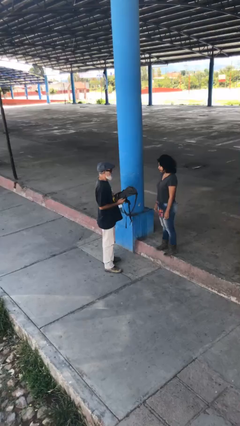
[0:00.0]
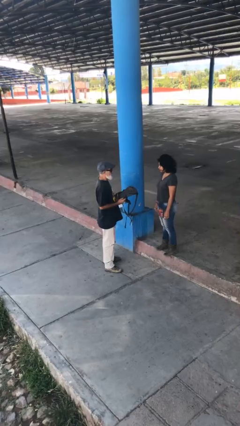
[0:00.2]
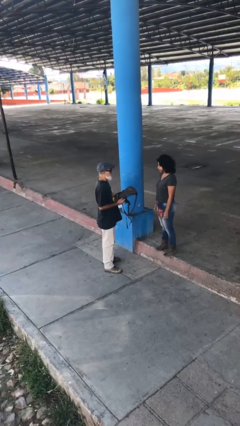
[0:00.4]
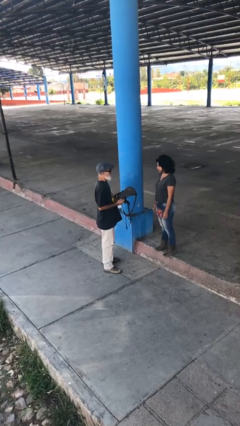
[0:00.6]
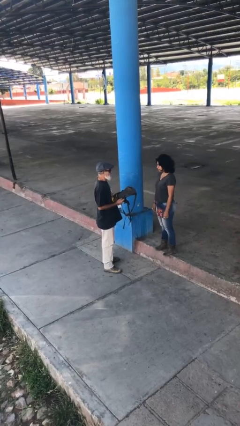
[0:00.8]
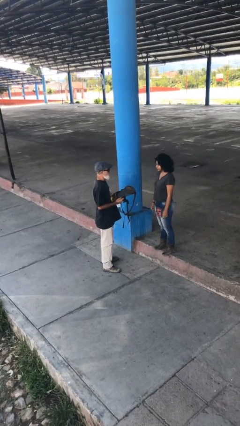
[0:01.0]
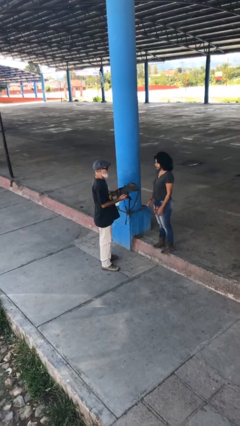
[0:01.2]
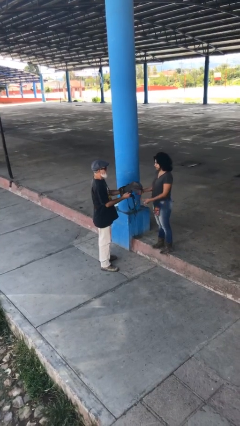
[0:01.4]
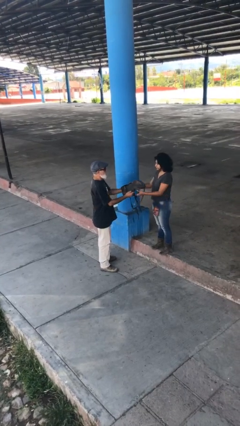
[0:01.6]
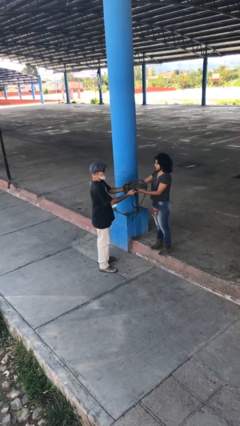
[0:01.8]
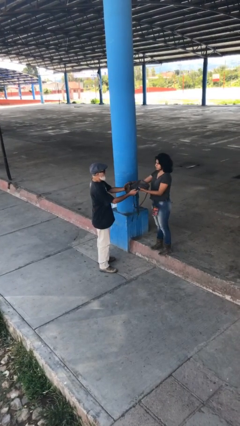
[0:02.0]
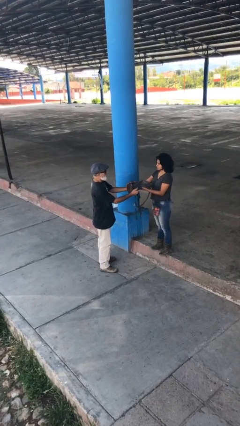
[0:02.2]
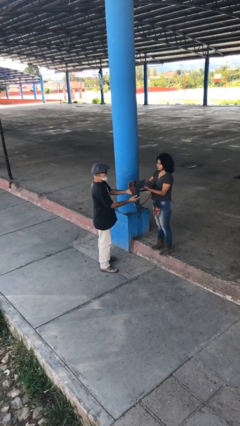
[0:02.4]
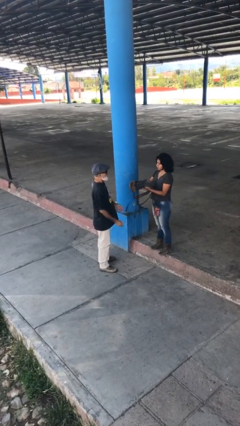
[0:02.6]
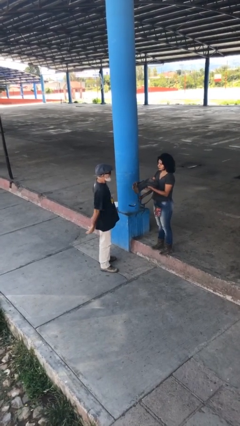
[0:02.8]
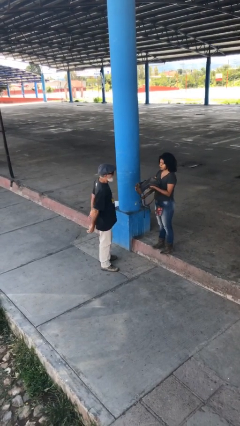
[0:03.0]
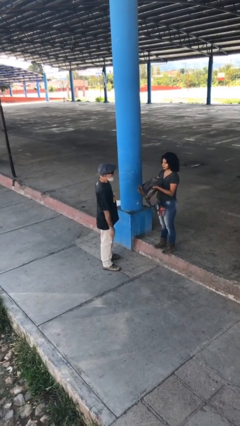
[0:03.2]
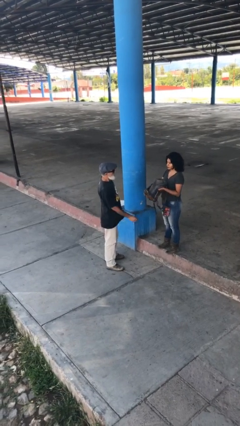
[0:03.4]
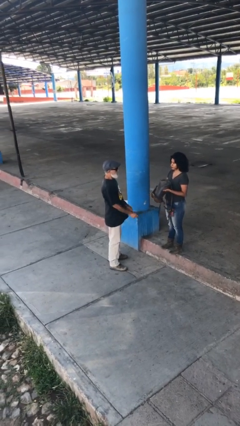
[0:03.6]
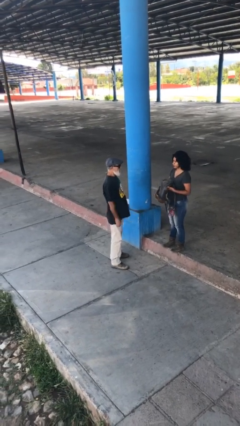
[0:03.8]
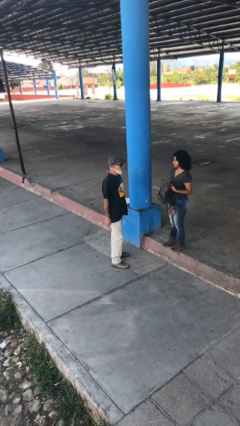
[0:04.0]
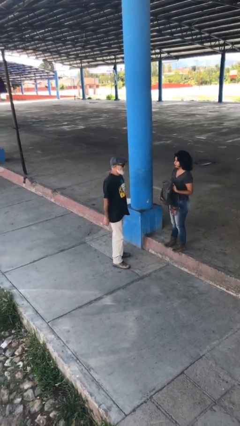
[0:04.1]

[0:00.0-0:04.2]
person transfers object to person

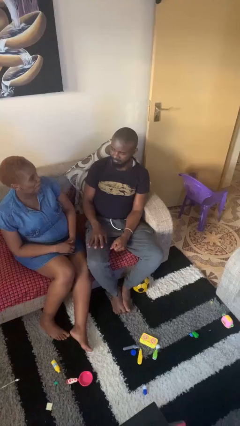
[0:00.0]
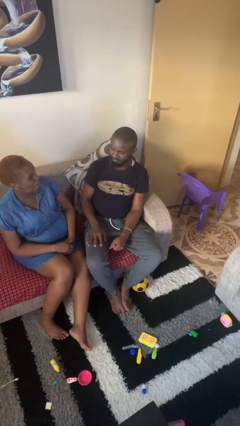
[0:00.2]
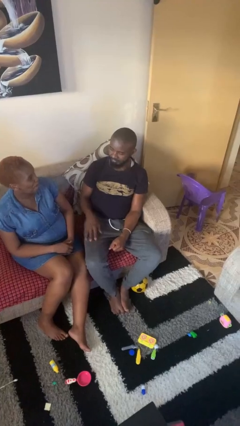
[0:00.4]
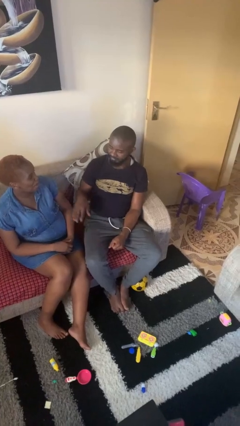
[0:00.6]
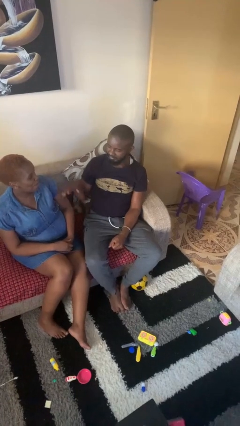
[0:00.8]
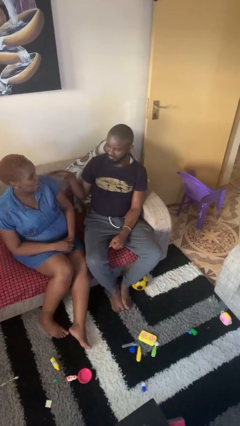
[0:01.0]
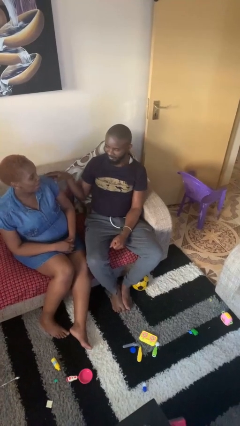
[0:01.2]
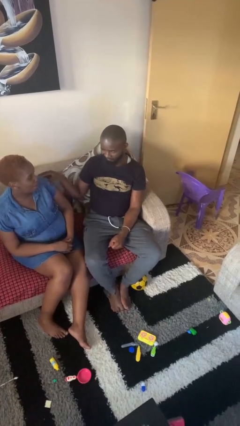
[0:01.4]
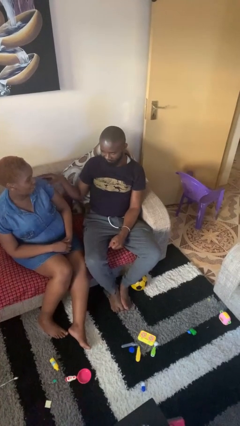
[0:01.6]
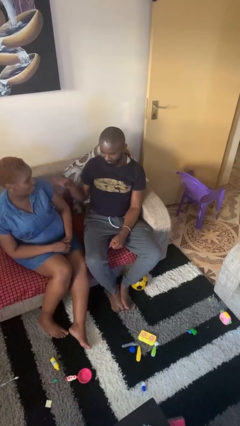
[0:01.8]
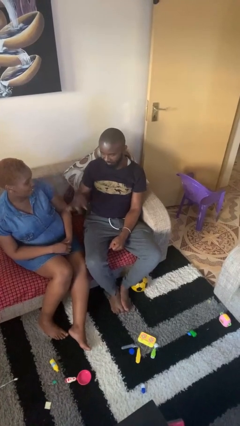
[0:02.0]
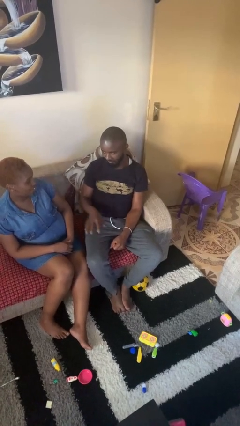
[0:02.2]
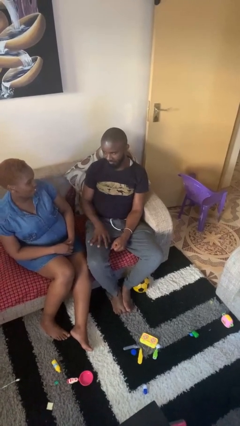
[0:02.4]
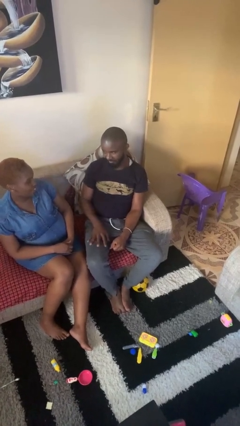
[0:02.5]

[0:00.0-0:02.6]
person shoves person

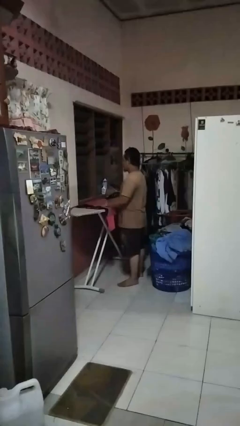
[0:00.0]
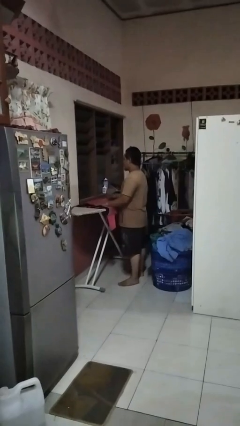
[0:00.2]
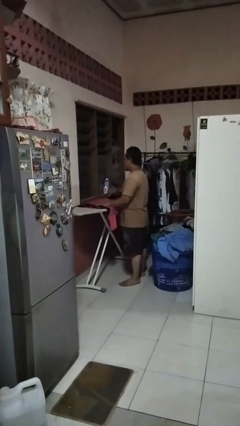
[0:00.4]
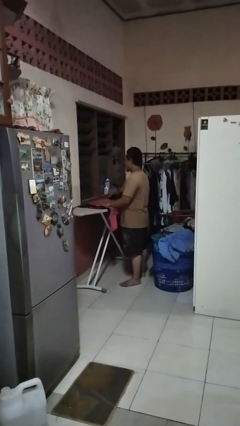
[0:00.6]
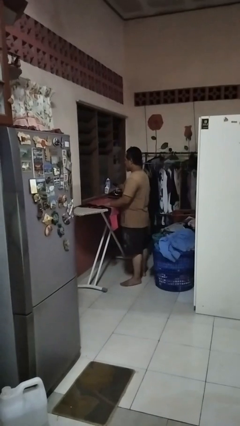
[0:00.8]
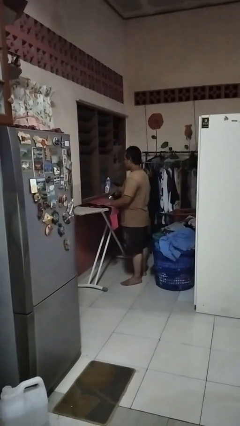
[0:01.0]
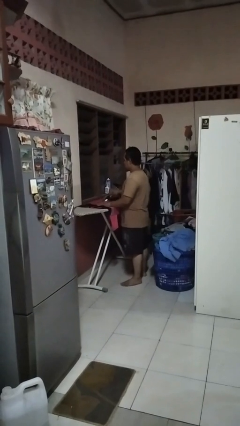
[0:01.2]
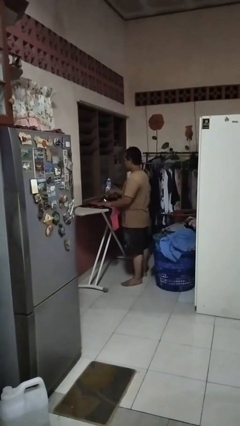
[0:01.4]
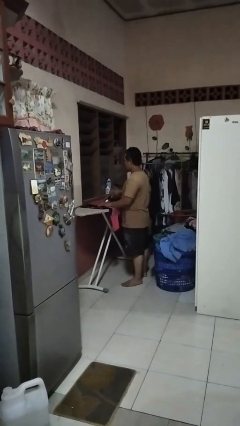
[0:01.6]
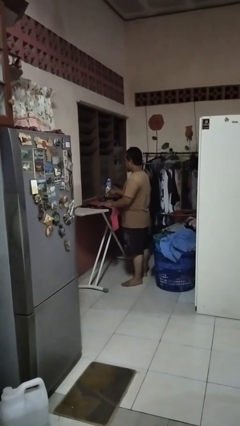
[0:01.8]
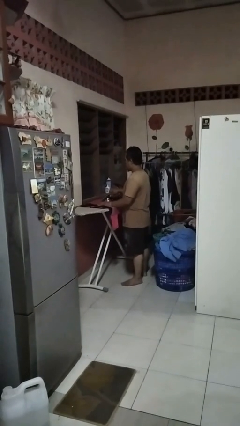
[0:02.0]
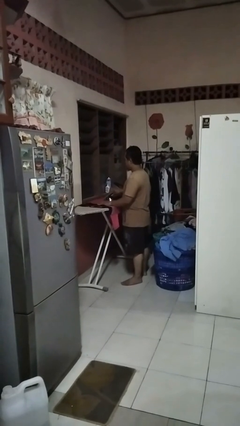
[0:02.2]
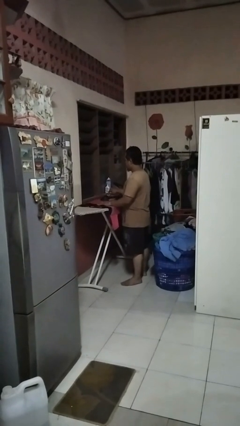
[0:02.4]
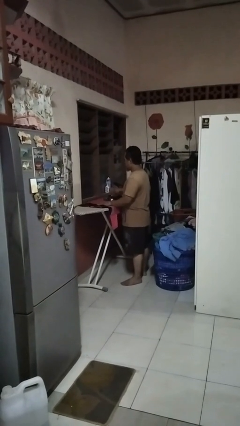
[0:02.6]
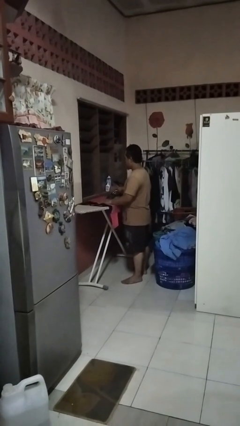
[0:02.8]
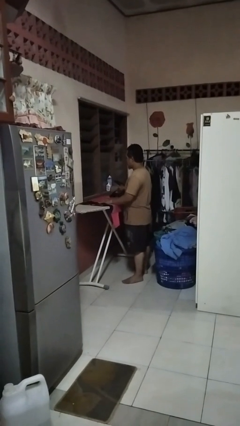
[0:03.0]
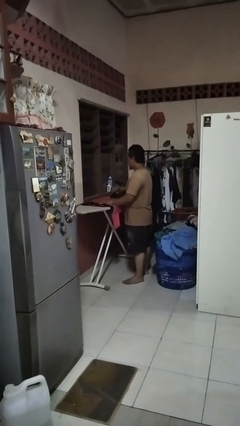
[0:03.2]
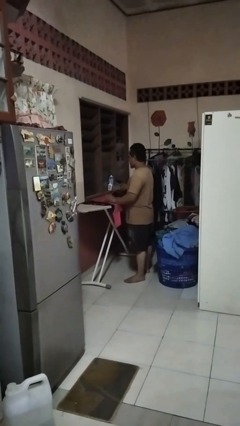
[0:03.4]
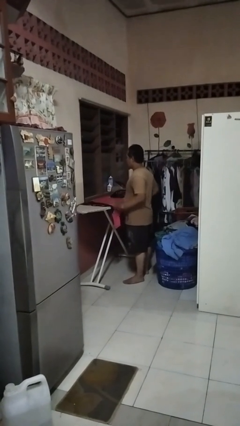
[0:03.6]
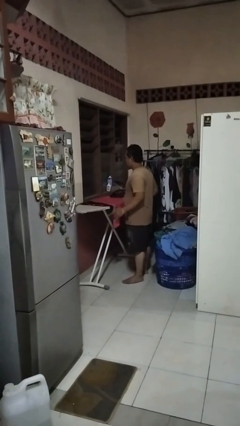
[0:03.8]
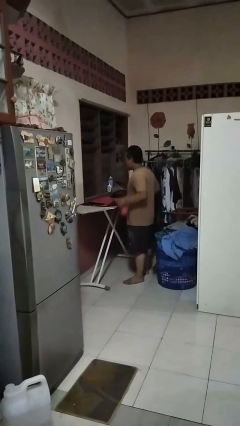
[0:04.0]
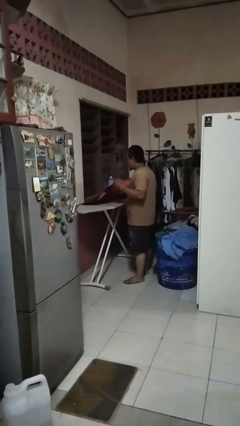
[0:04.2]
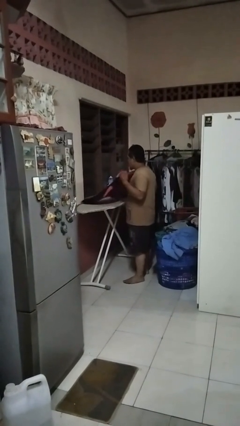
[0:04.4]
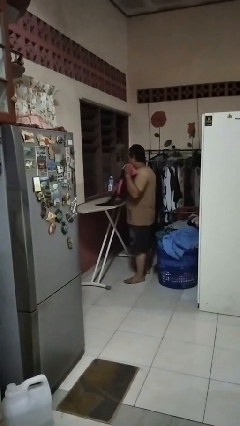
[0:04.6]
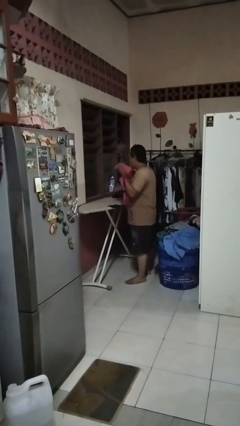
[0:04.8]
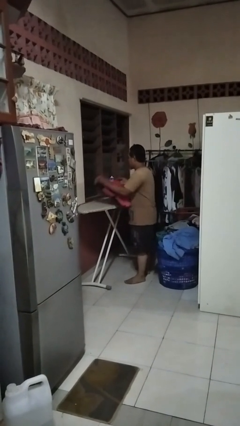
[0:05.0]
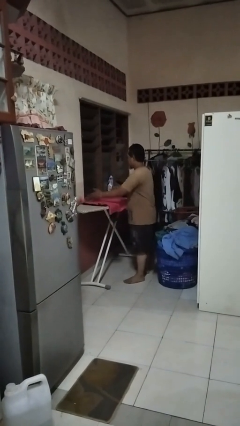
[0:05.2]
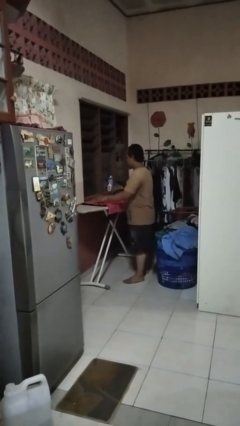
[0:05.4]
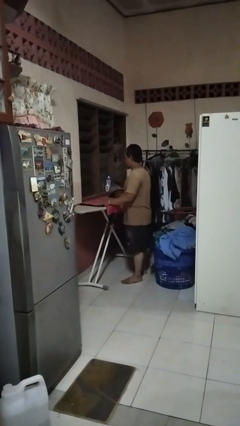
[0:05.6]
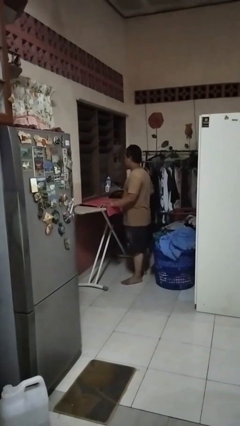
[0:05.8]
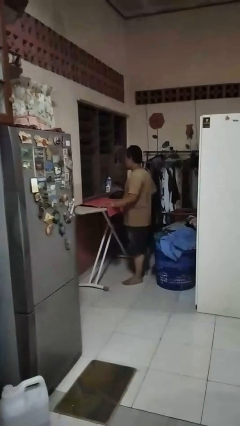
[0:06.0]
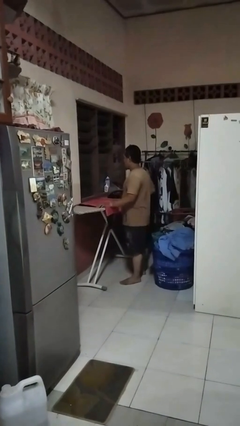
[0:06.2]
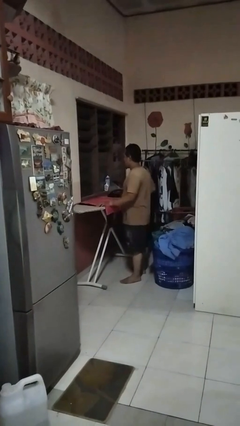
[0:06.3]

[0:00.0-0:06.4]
person irons clothes

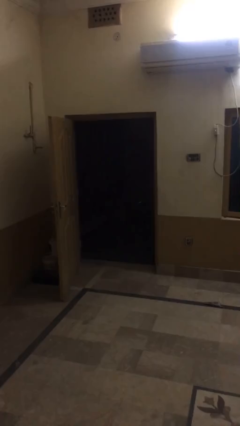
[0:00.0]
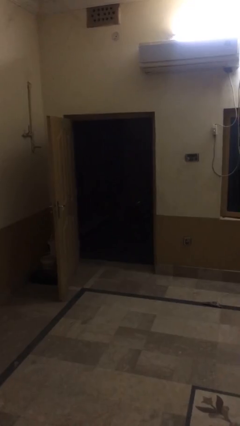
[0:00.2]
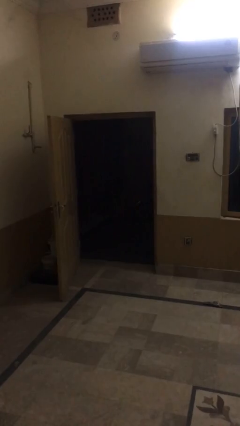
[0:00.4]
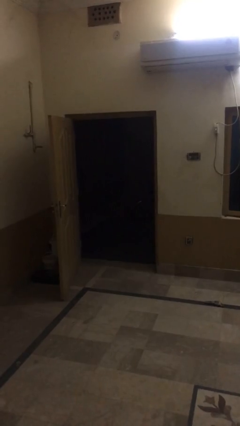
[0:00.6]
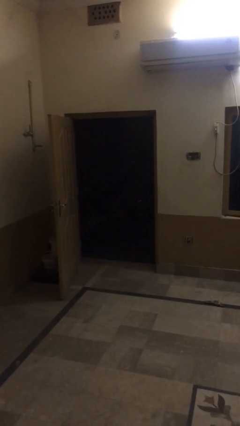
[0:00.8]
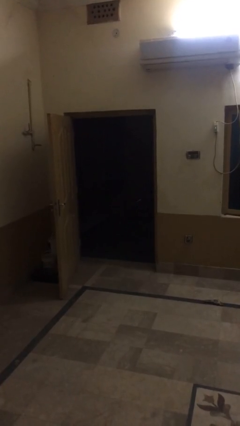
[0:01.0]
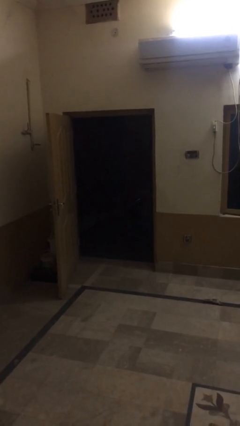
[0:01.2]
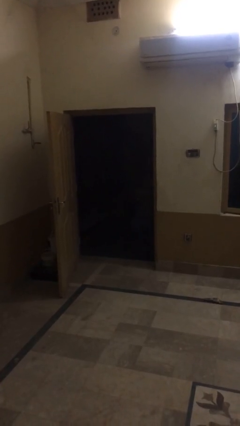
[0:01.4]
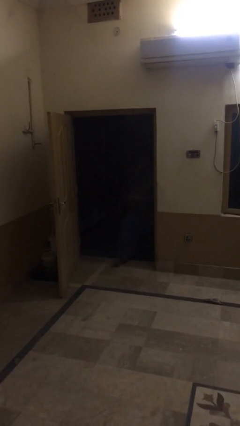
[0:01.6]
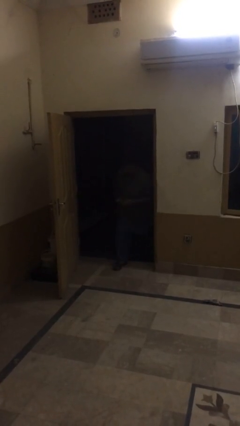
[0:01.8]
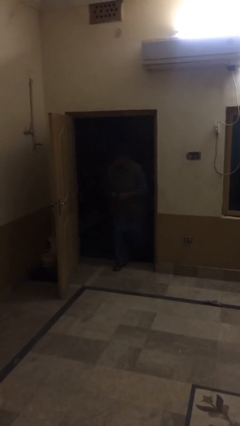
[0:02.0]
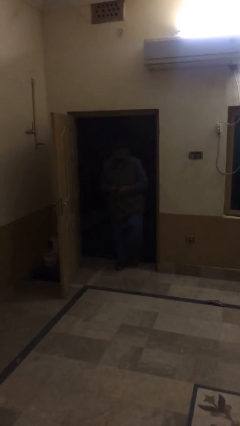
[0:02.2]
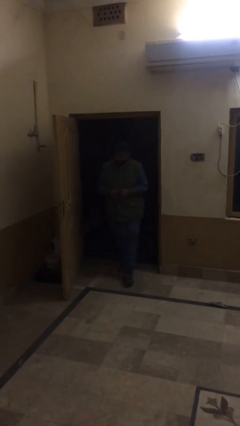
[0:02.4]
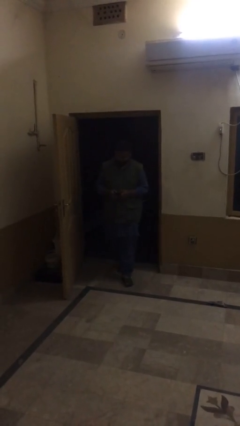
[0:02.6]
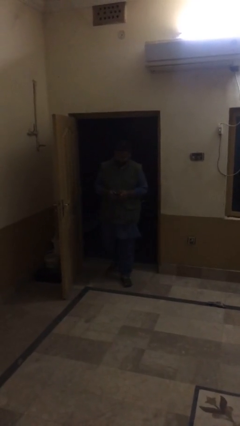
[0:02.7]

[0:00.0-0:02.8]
person enters scene through structure

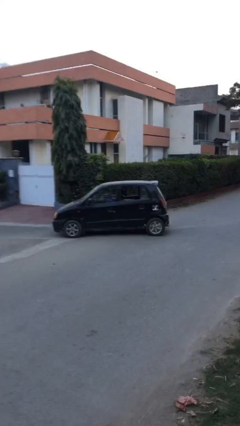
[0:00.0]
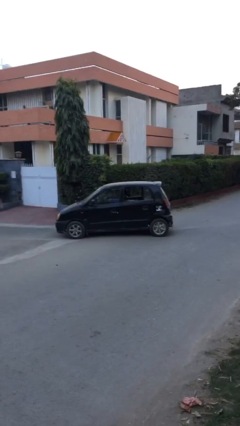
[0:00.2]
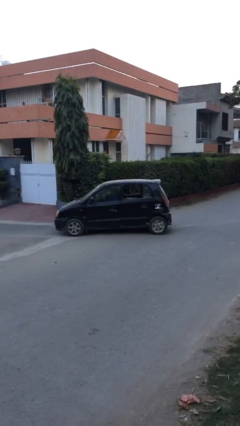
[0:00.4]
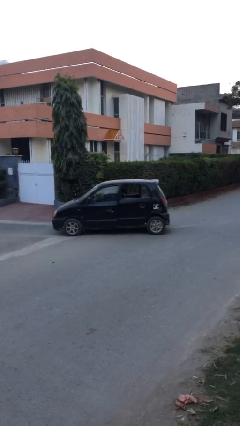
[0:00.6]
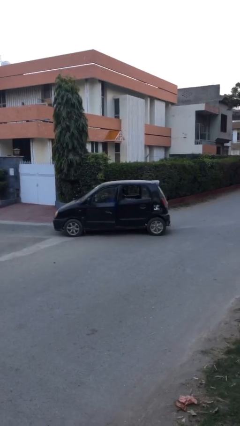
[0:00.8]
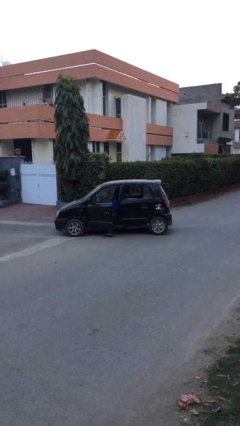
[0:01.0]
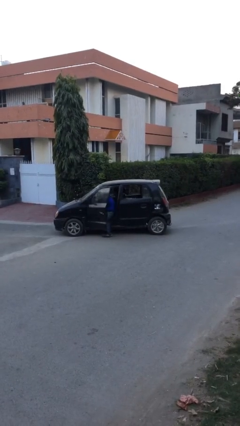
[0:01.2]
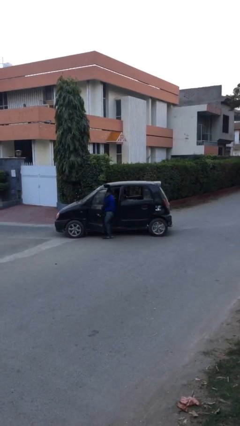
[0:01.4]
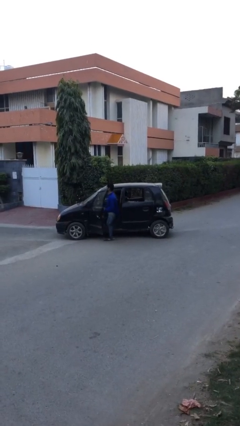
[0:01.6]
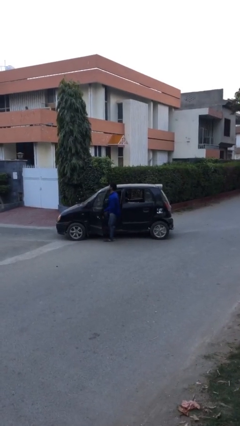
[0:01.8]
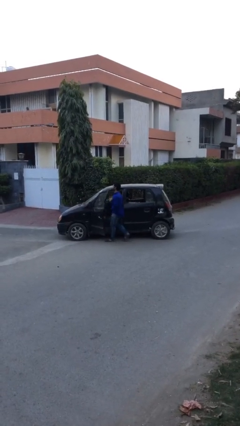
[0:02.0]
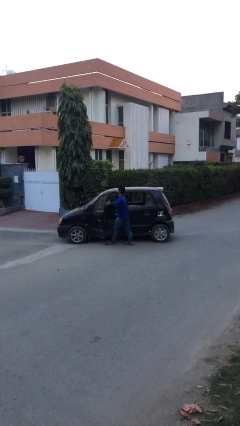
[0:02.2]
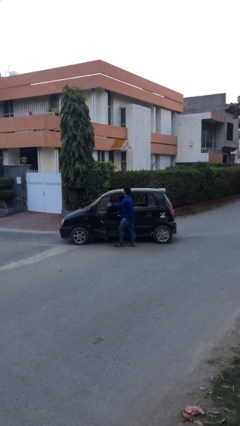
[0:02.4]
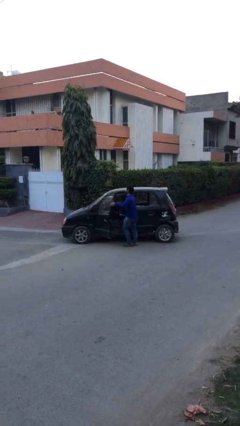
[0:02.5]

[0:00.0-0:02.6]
car drops off person
